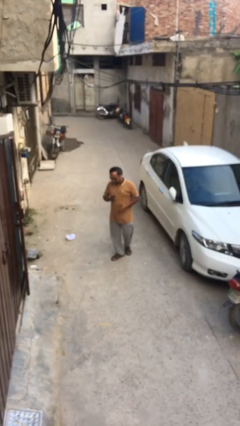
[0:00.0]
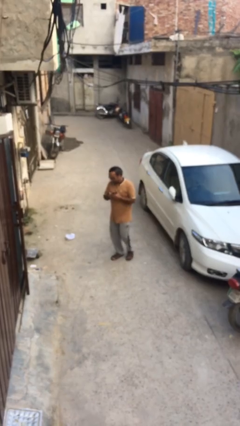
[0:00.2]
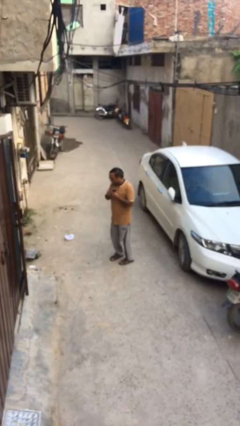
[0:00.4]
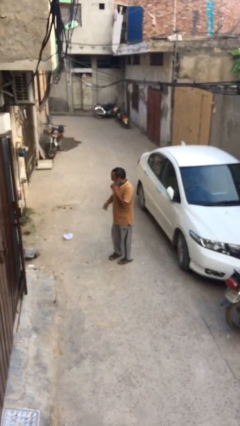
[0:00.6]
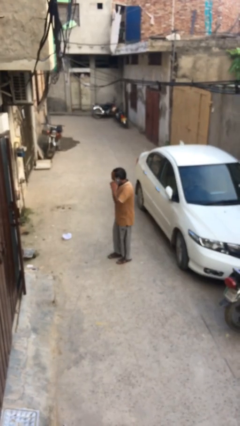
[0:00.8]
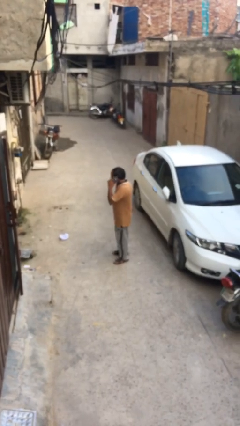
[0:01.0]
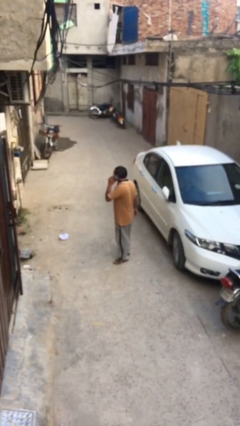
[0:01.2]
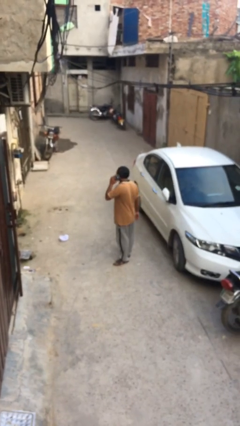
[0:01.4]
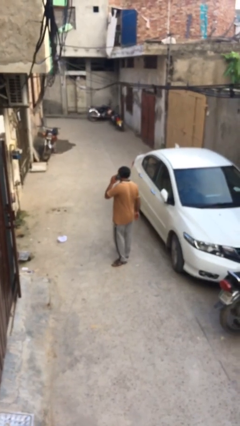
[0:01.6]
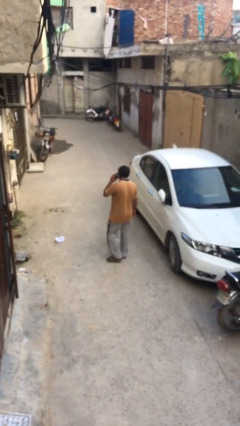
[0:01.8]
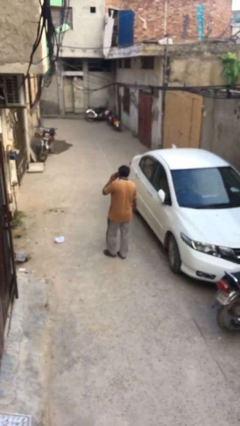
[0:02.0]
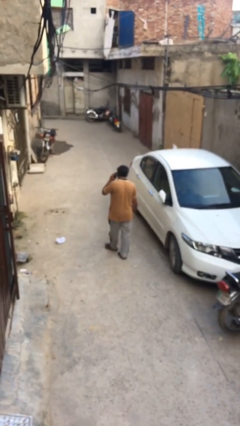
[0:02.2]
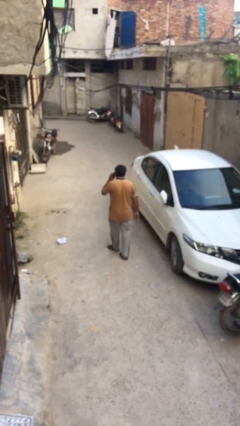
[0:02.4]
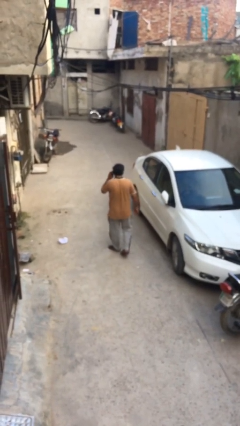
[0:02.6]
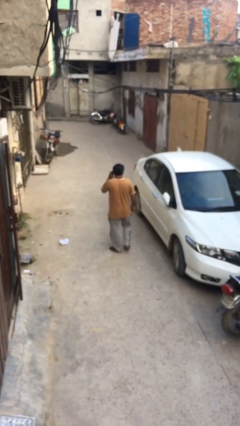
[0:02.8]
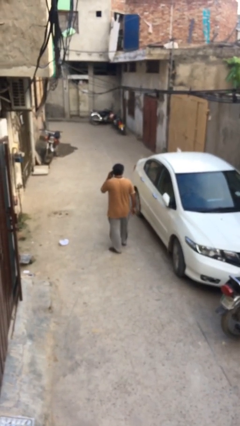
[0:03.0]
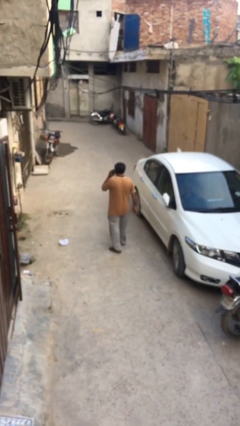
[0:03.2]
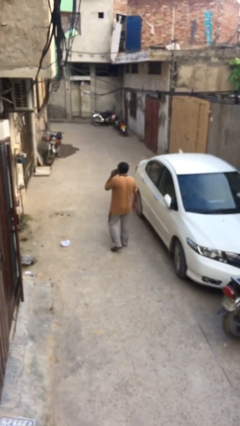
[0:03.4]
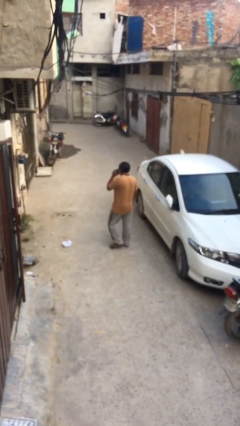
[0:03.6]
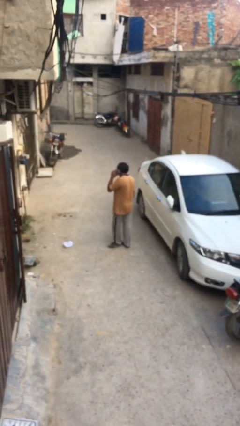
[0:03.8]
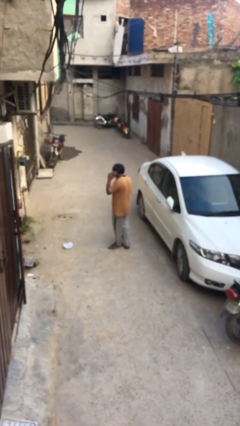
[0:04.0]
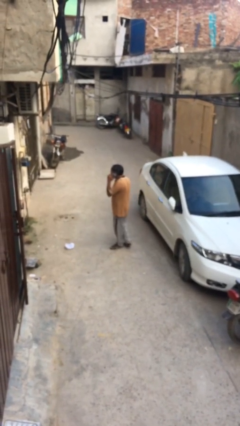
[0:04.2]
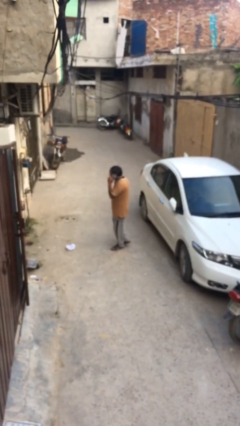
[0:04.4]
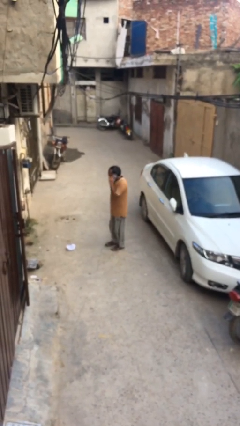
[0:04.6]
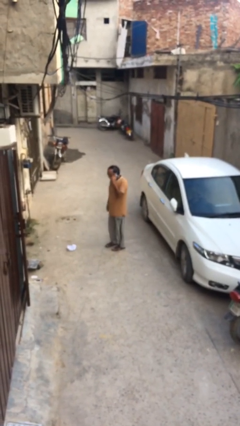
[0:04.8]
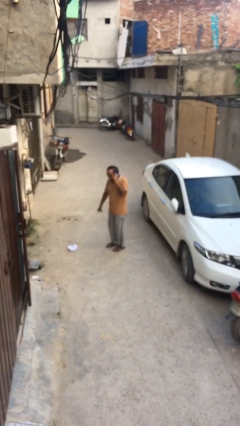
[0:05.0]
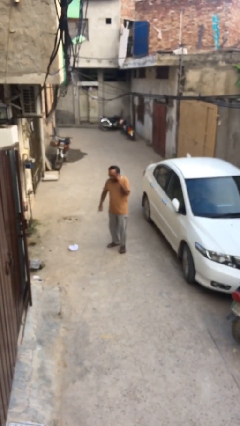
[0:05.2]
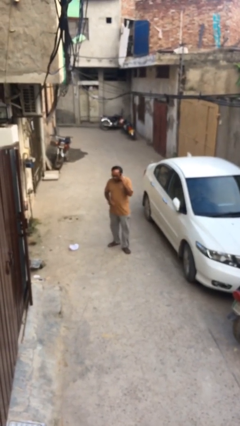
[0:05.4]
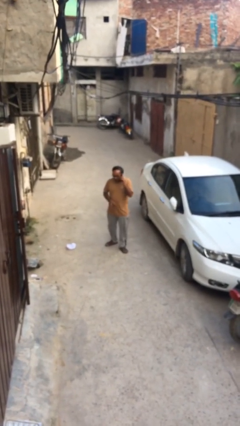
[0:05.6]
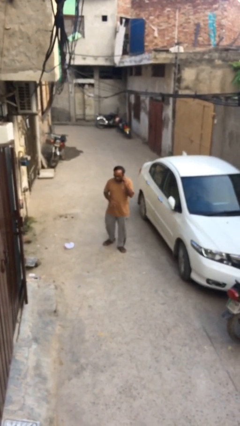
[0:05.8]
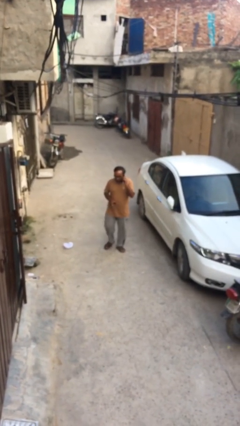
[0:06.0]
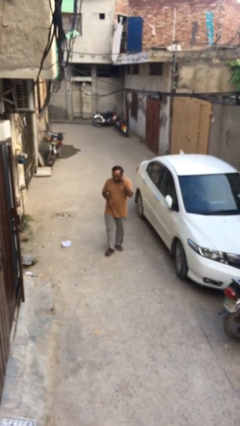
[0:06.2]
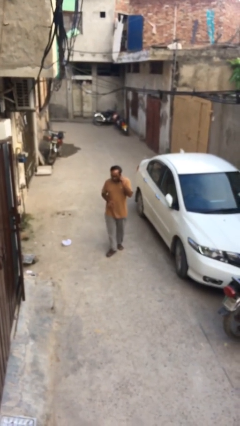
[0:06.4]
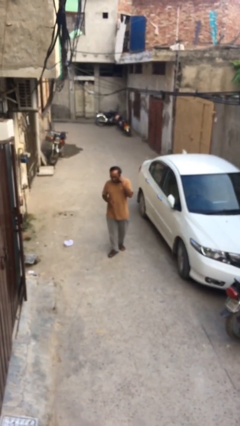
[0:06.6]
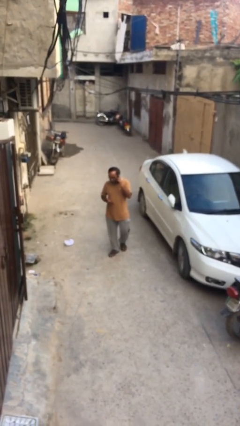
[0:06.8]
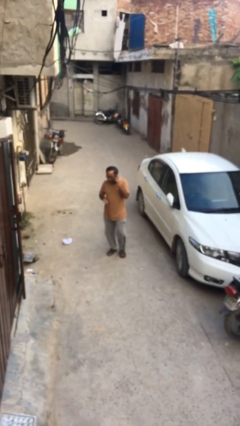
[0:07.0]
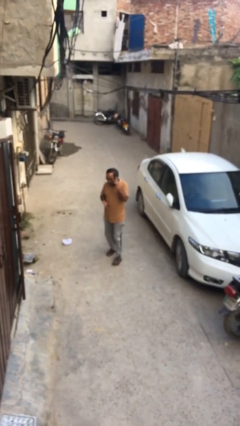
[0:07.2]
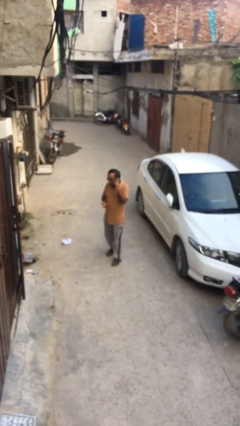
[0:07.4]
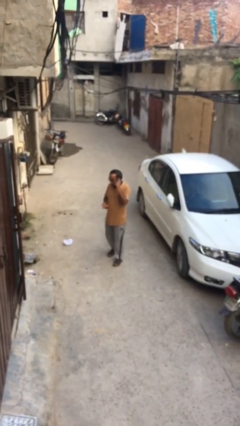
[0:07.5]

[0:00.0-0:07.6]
person talks on phone

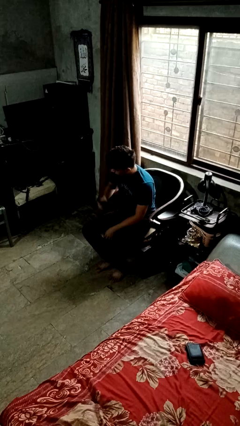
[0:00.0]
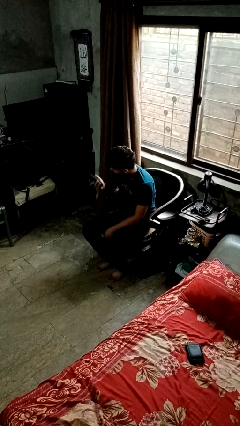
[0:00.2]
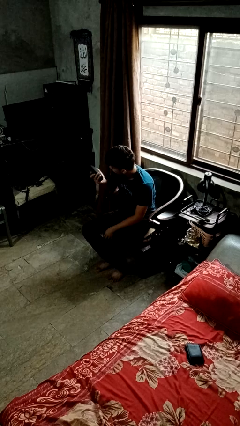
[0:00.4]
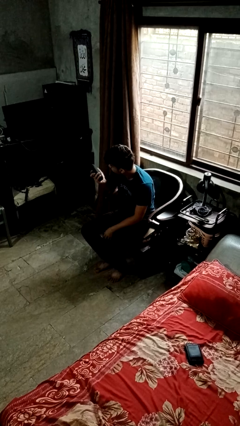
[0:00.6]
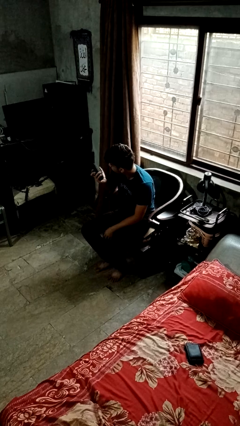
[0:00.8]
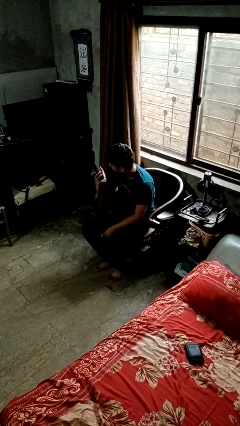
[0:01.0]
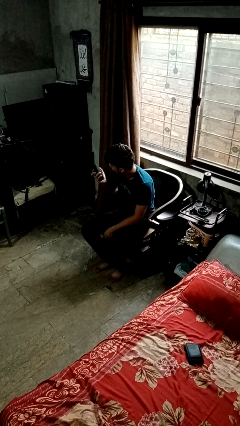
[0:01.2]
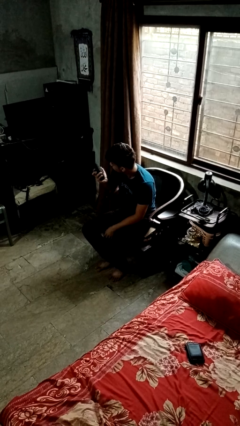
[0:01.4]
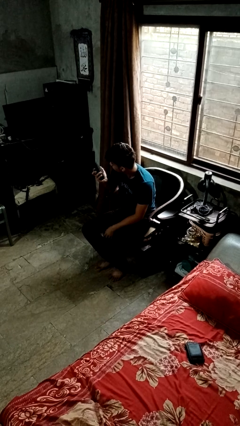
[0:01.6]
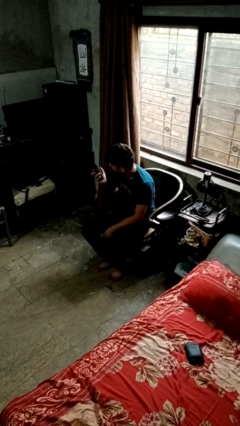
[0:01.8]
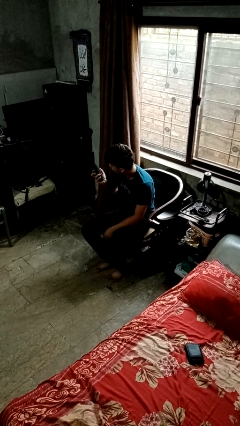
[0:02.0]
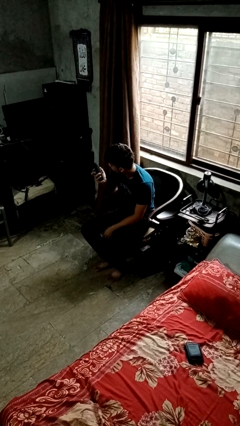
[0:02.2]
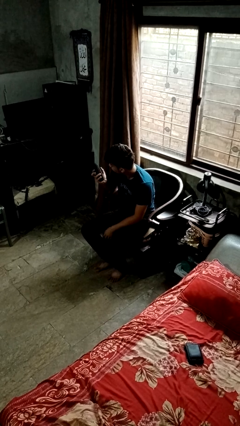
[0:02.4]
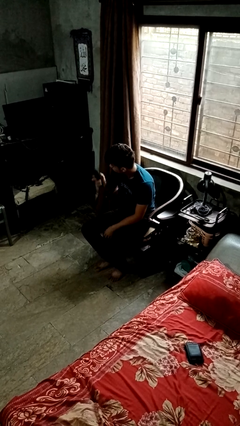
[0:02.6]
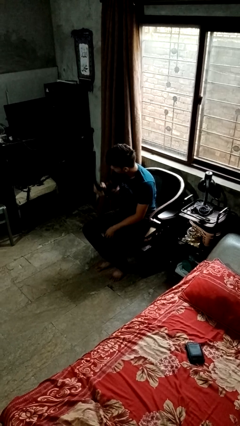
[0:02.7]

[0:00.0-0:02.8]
person uses television remote

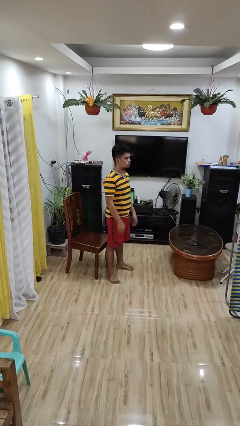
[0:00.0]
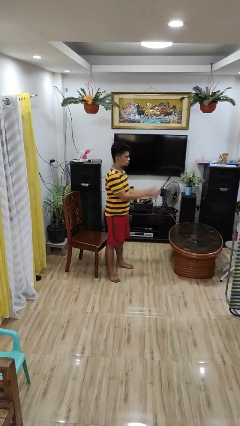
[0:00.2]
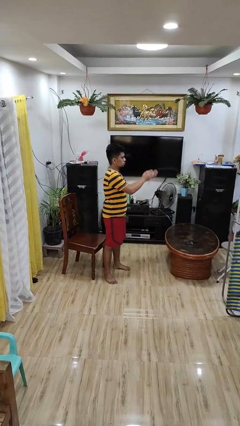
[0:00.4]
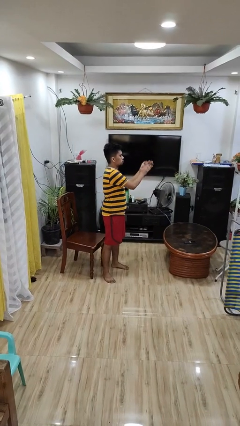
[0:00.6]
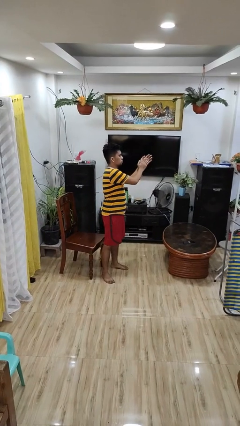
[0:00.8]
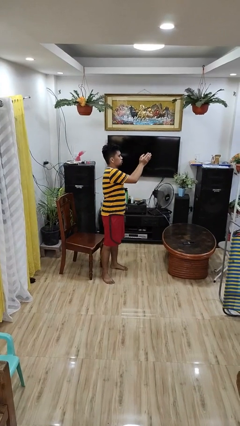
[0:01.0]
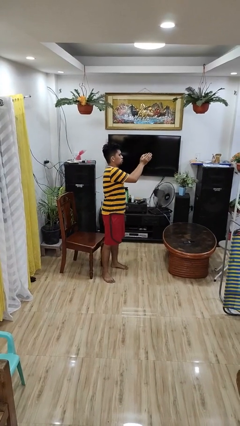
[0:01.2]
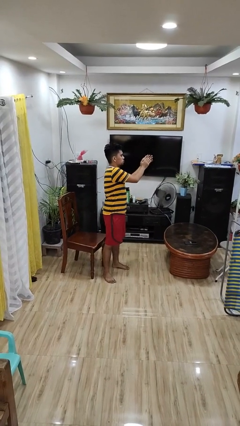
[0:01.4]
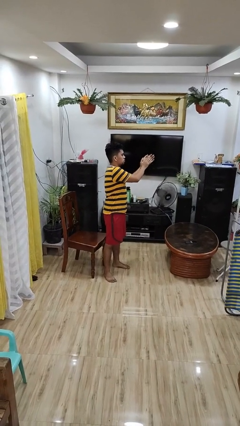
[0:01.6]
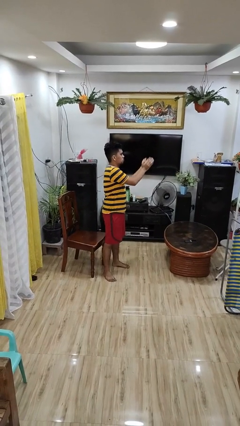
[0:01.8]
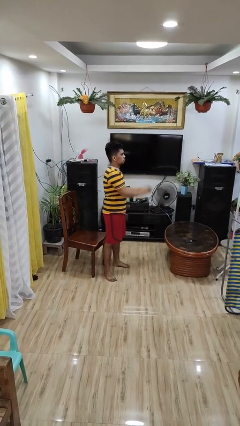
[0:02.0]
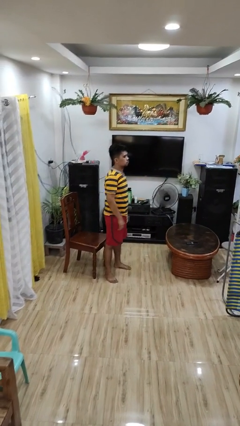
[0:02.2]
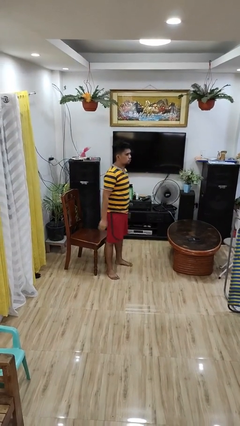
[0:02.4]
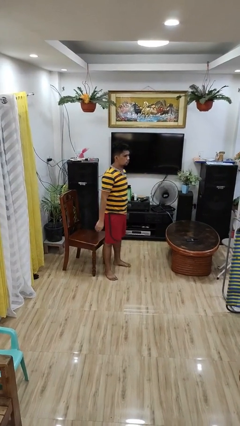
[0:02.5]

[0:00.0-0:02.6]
person claps hands

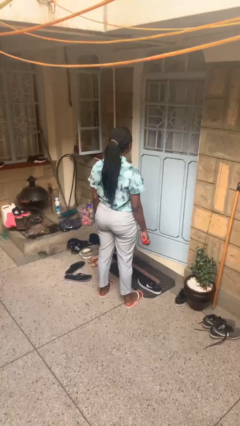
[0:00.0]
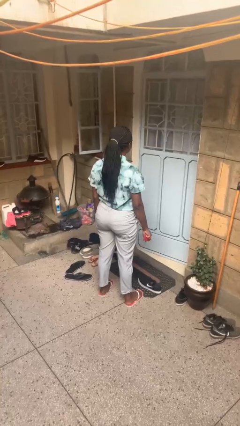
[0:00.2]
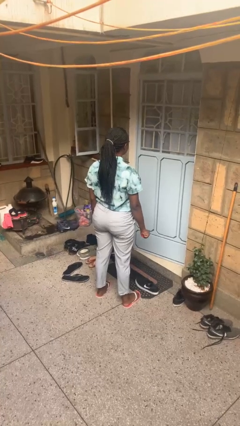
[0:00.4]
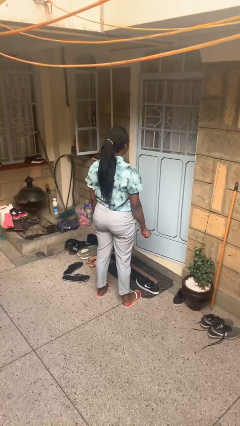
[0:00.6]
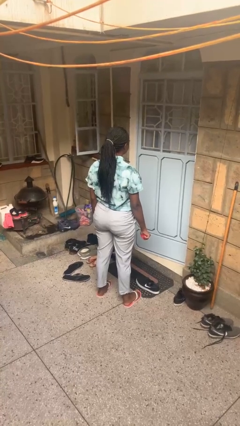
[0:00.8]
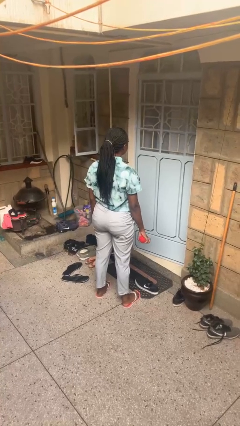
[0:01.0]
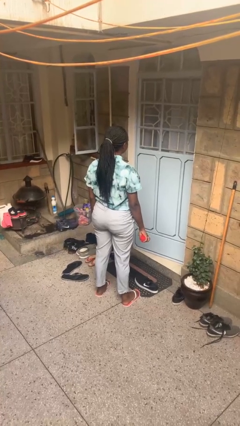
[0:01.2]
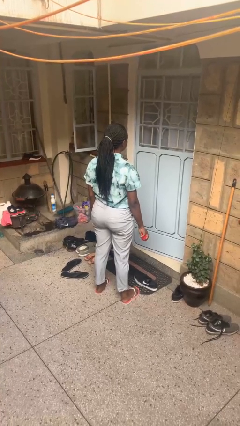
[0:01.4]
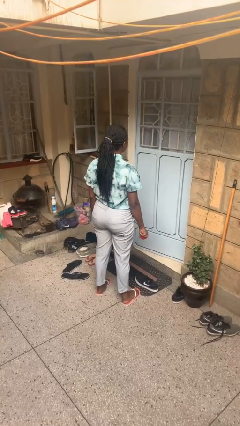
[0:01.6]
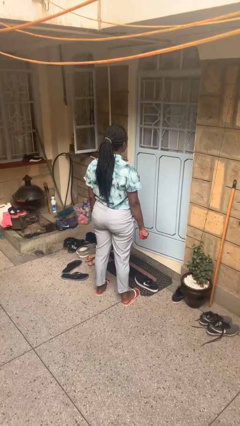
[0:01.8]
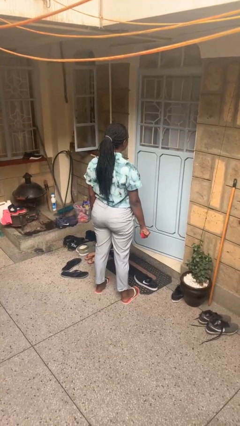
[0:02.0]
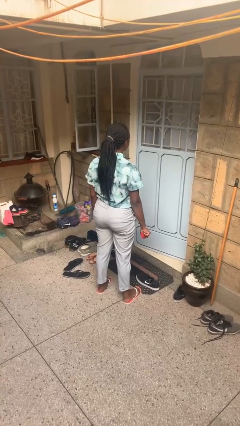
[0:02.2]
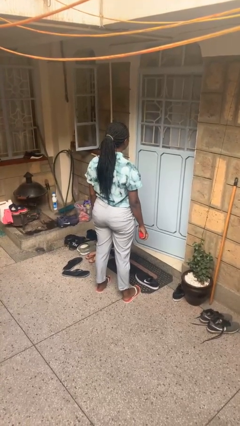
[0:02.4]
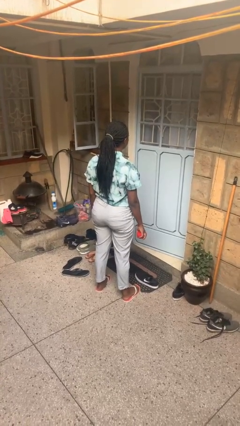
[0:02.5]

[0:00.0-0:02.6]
person squeezes object

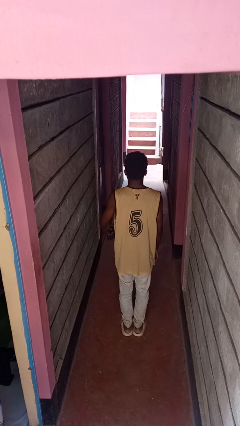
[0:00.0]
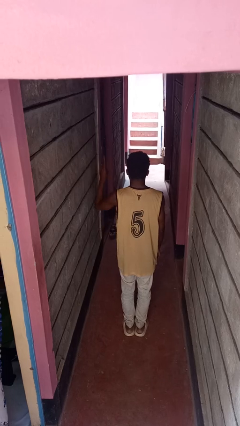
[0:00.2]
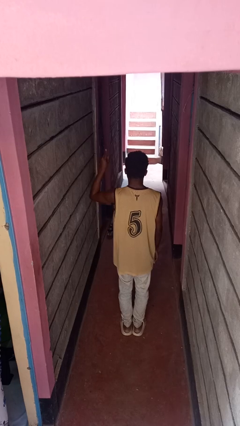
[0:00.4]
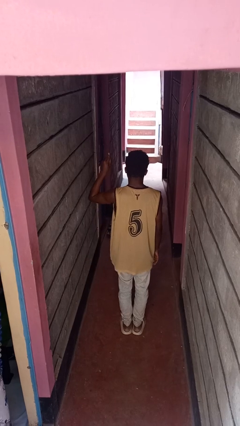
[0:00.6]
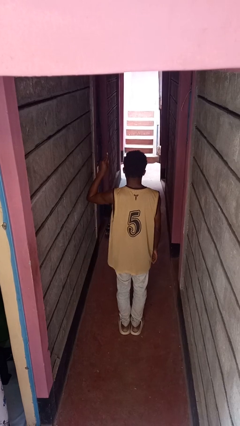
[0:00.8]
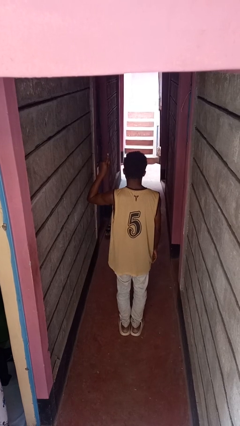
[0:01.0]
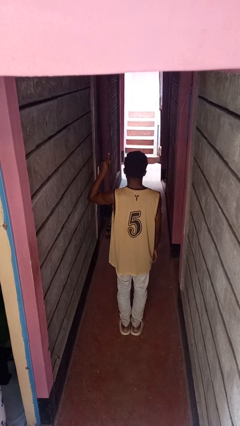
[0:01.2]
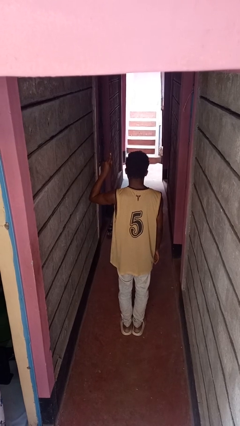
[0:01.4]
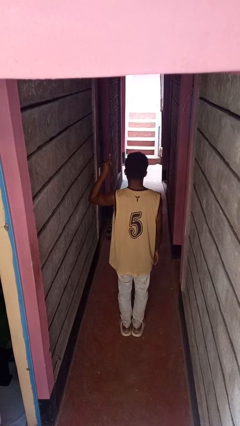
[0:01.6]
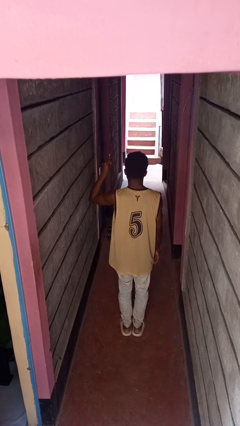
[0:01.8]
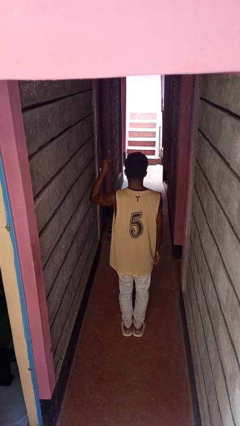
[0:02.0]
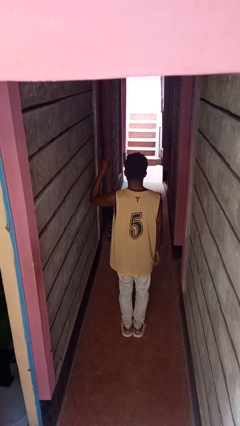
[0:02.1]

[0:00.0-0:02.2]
person gestures number one
